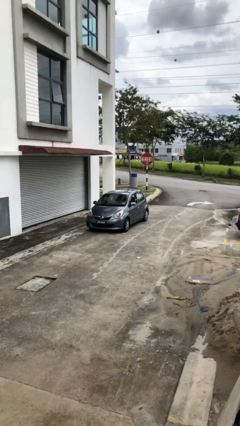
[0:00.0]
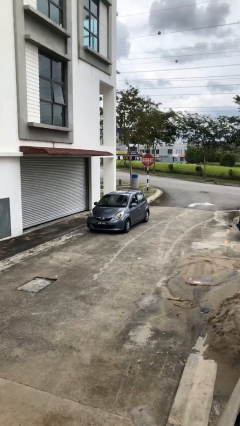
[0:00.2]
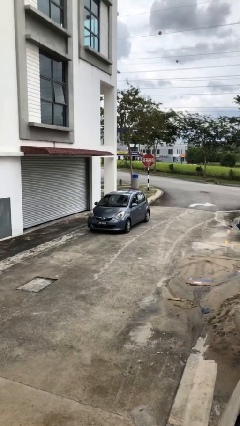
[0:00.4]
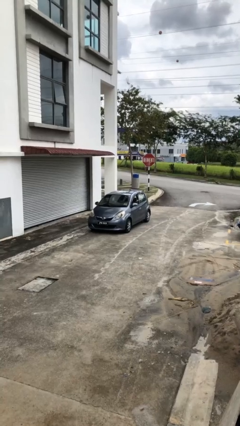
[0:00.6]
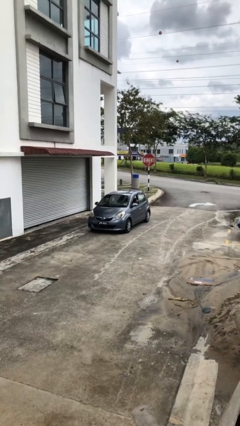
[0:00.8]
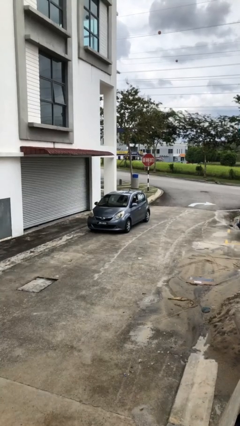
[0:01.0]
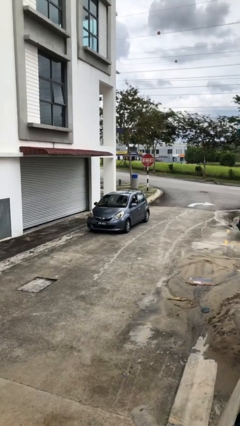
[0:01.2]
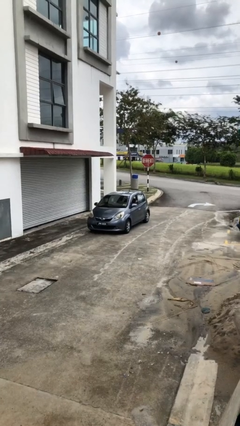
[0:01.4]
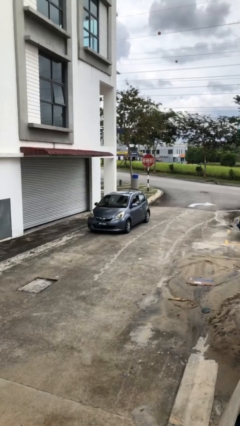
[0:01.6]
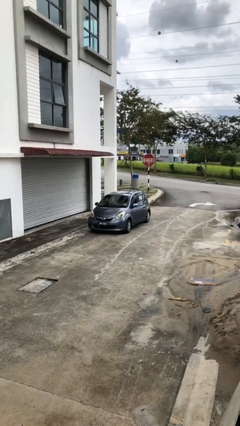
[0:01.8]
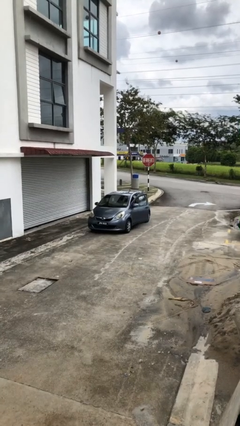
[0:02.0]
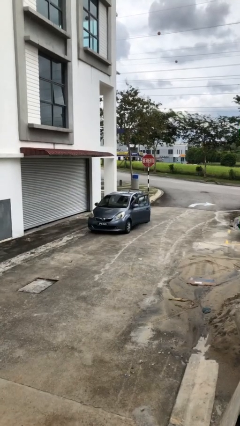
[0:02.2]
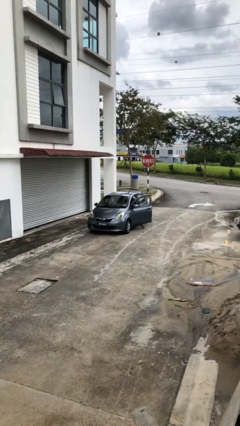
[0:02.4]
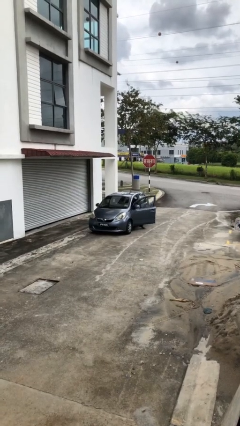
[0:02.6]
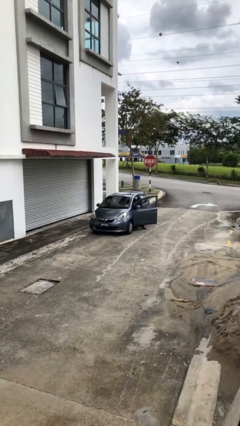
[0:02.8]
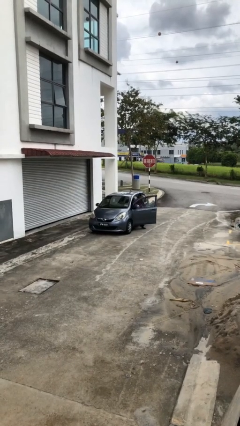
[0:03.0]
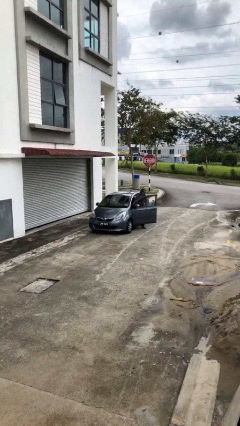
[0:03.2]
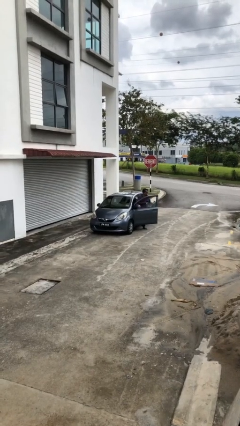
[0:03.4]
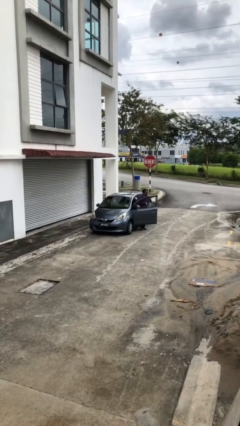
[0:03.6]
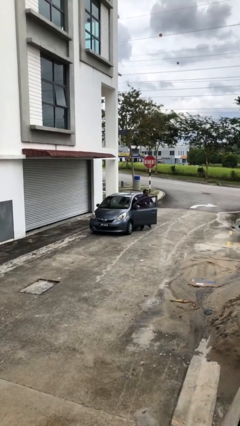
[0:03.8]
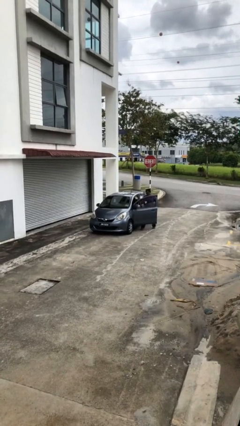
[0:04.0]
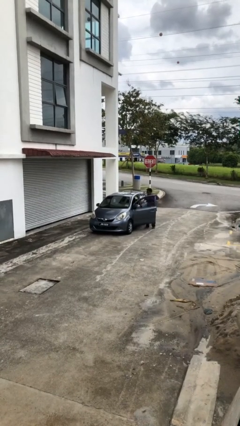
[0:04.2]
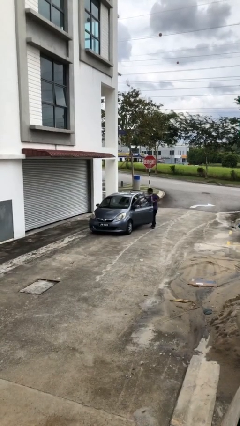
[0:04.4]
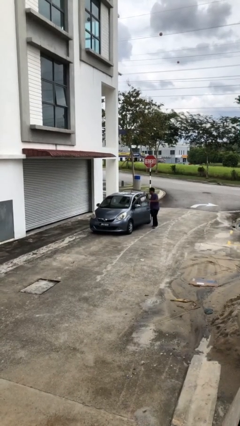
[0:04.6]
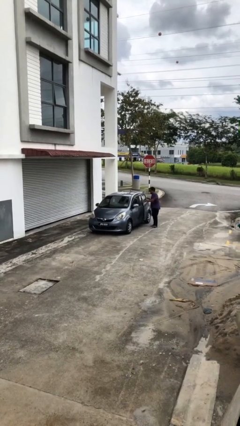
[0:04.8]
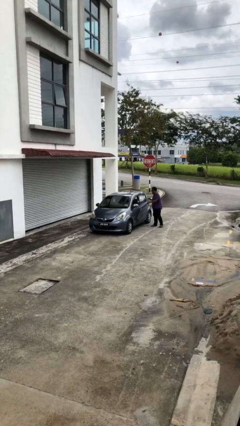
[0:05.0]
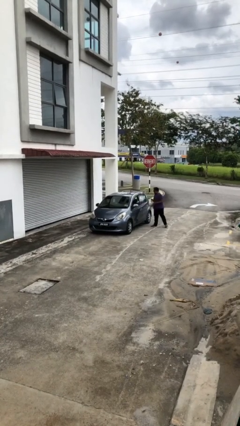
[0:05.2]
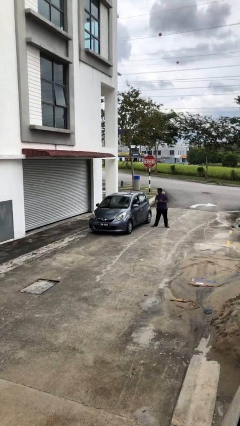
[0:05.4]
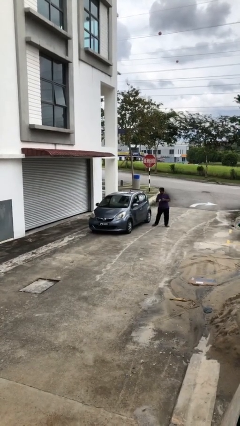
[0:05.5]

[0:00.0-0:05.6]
car drops off person

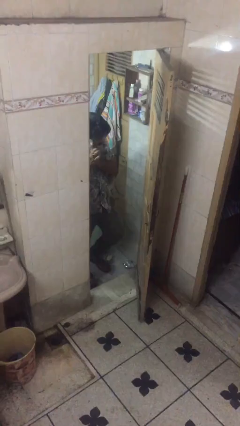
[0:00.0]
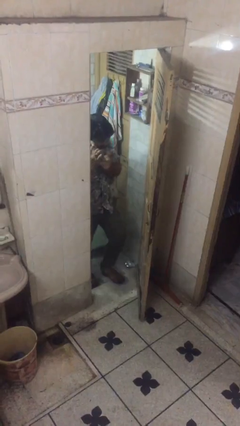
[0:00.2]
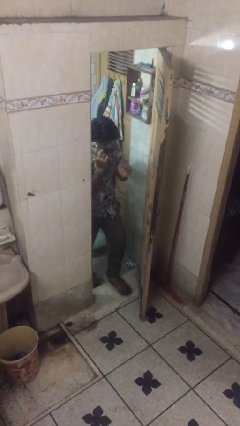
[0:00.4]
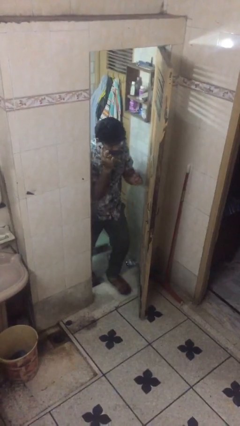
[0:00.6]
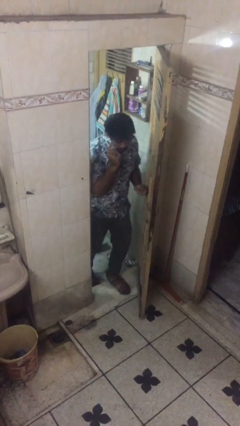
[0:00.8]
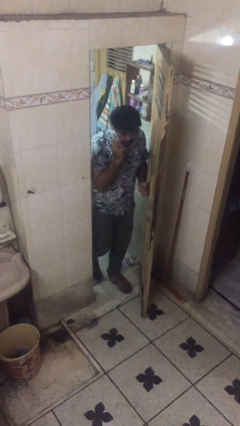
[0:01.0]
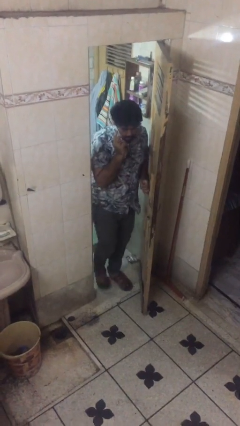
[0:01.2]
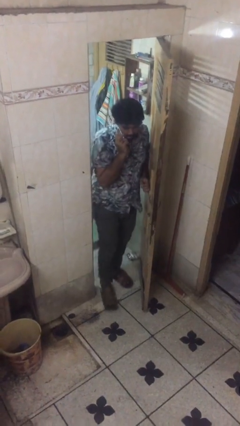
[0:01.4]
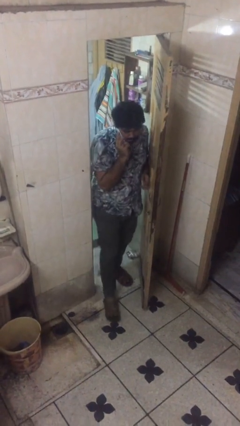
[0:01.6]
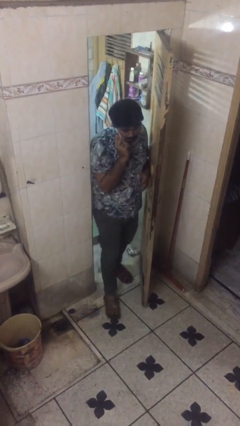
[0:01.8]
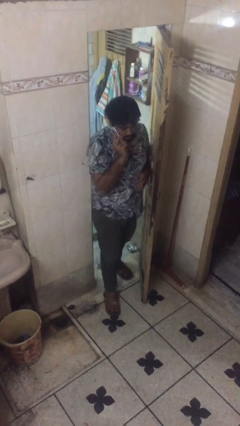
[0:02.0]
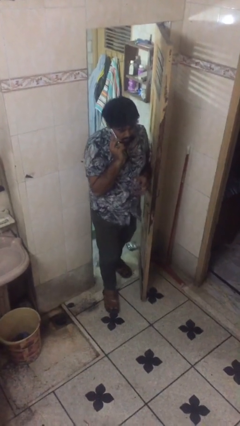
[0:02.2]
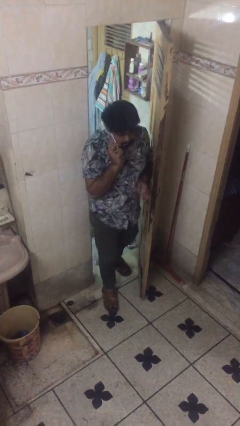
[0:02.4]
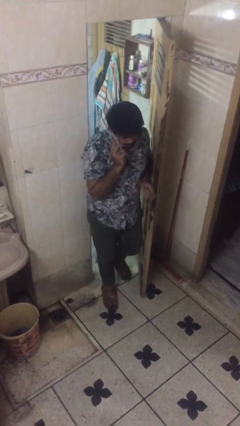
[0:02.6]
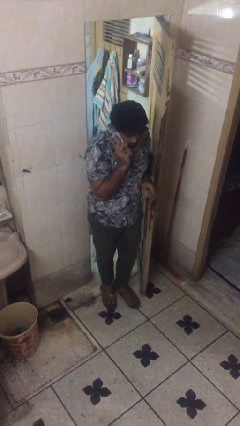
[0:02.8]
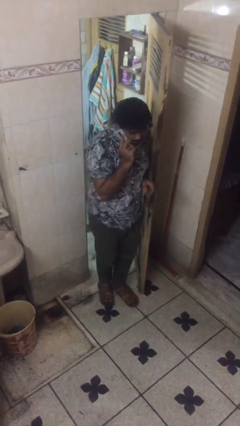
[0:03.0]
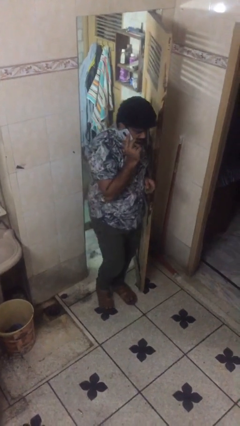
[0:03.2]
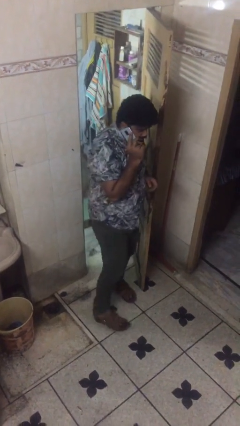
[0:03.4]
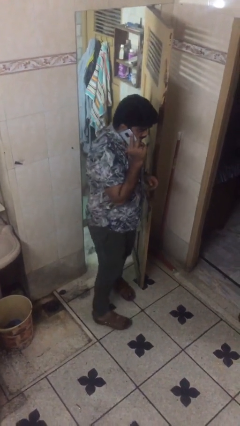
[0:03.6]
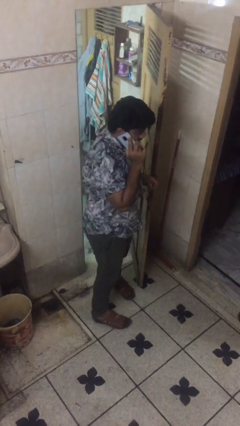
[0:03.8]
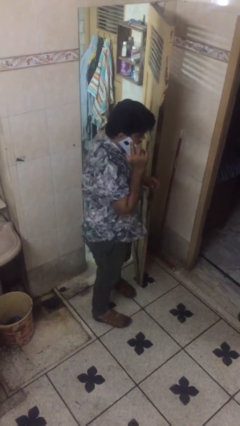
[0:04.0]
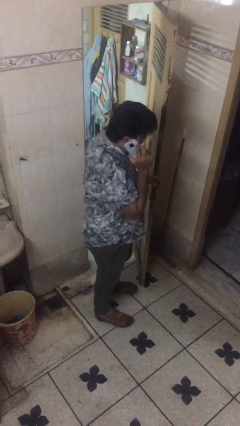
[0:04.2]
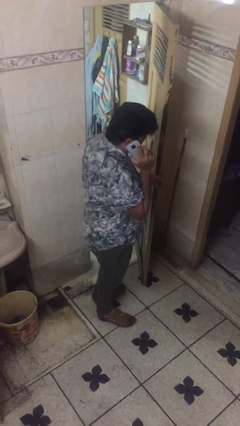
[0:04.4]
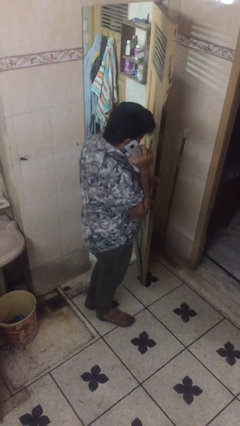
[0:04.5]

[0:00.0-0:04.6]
person enters scene through structure

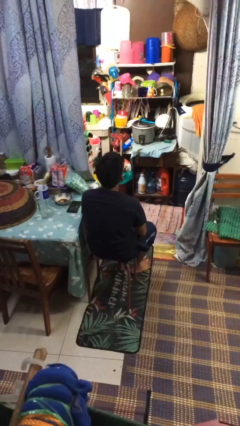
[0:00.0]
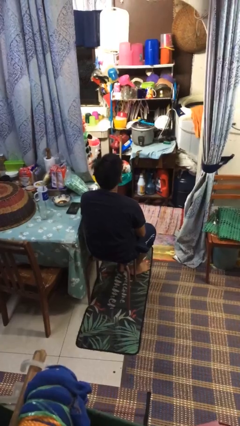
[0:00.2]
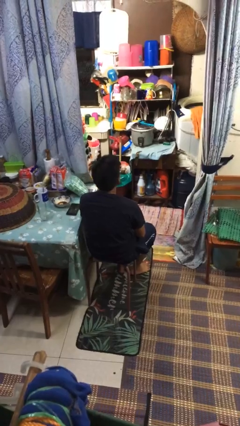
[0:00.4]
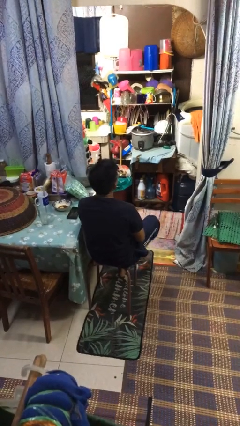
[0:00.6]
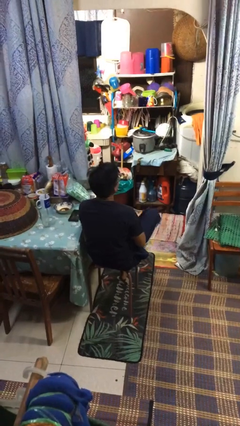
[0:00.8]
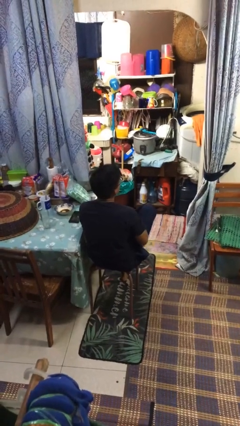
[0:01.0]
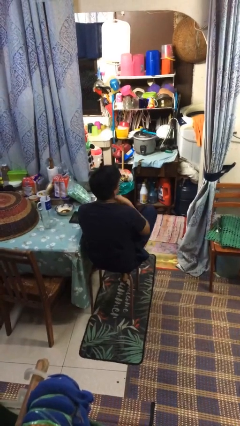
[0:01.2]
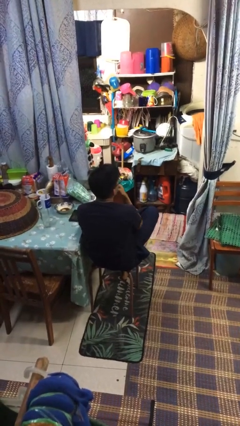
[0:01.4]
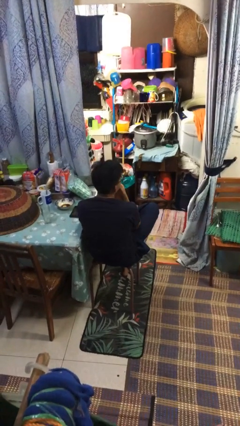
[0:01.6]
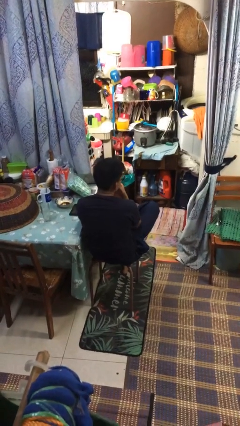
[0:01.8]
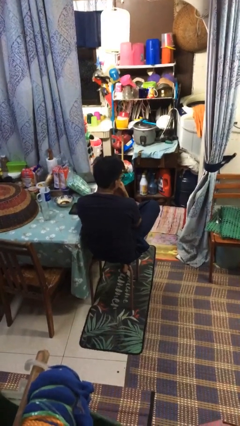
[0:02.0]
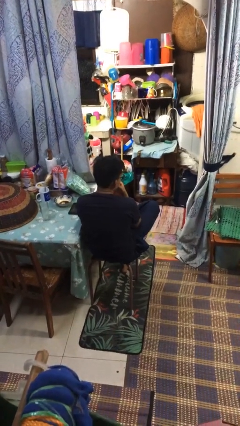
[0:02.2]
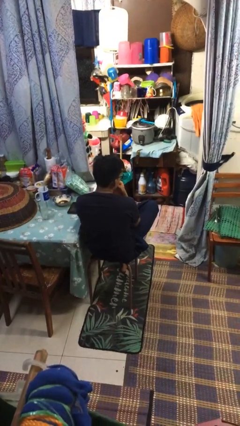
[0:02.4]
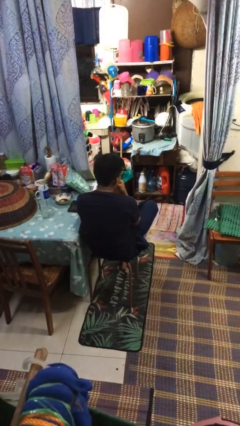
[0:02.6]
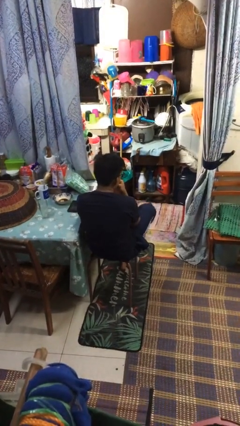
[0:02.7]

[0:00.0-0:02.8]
person crosses legs

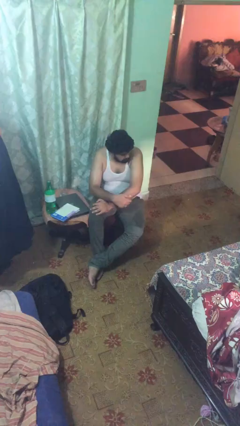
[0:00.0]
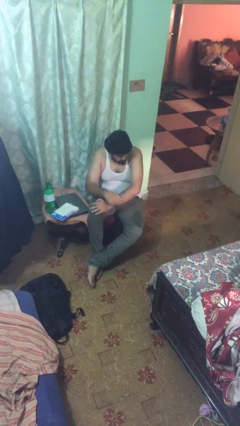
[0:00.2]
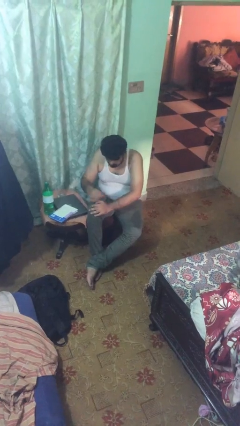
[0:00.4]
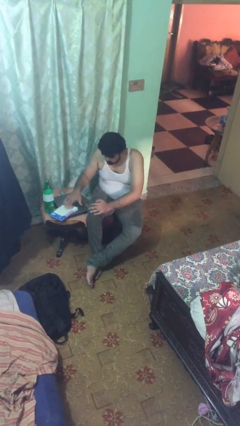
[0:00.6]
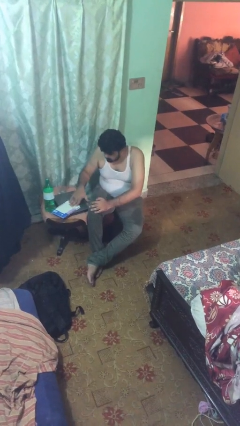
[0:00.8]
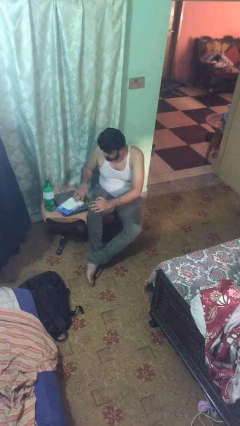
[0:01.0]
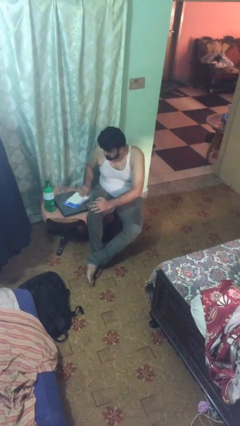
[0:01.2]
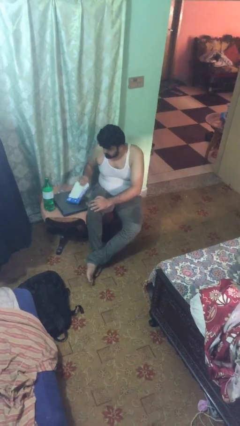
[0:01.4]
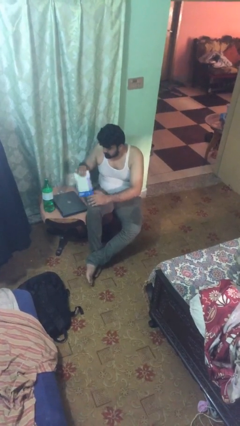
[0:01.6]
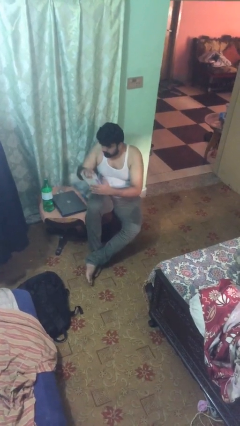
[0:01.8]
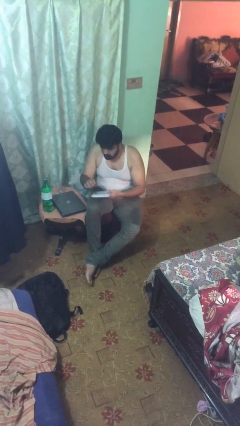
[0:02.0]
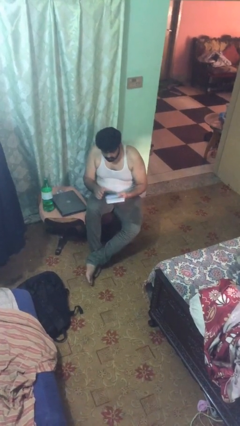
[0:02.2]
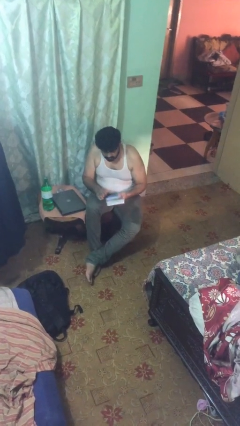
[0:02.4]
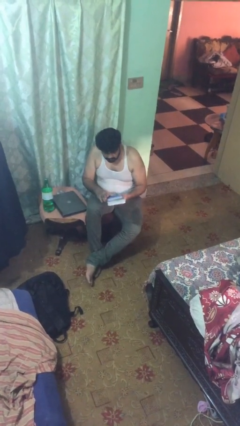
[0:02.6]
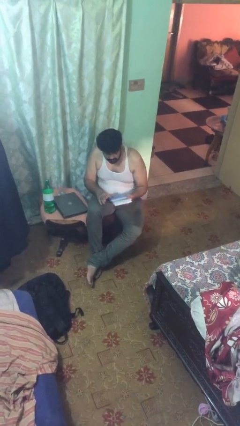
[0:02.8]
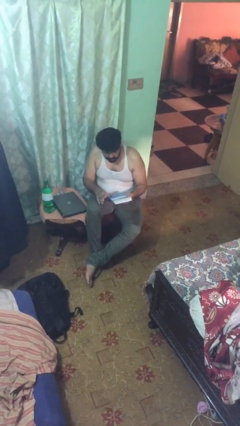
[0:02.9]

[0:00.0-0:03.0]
person picks up object from table

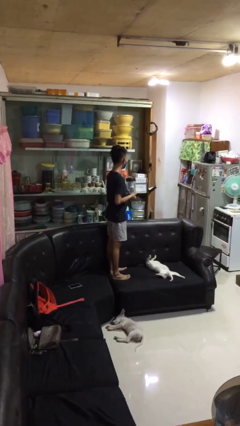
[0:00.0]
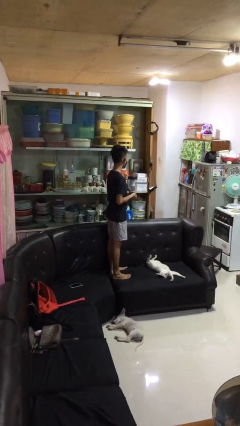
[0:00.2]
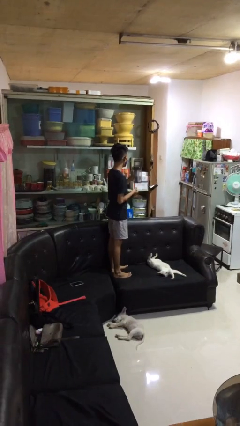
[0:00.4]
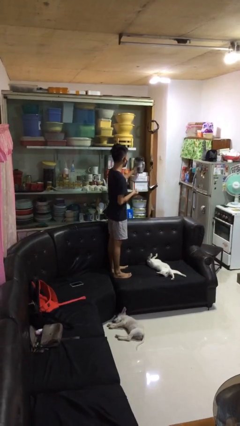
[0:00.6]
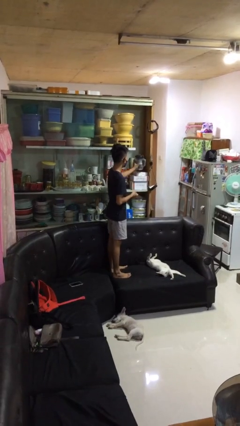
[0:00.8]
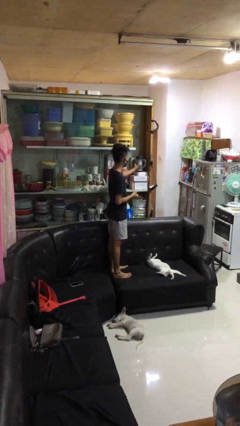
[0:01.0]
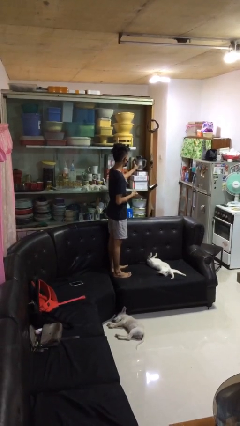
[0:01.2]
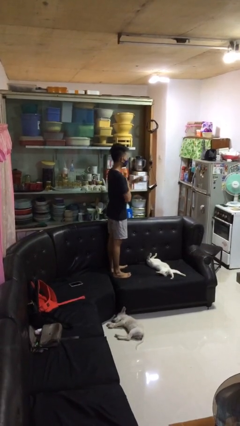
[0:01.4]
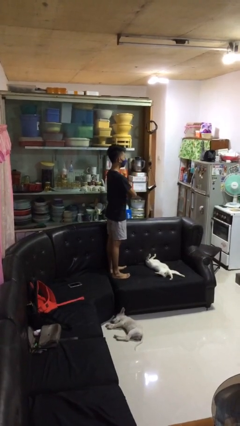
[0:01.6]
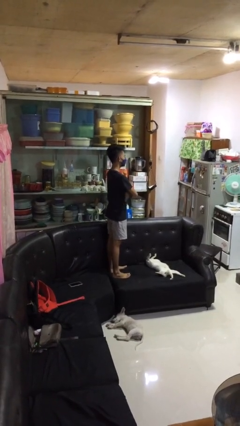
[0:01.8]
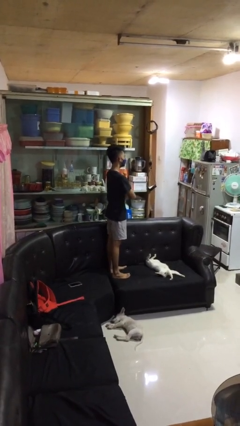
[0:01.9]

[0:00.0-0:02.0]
person puts down object into cabinet

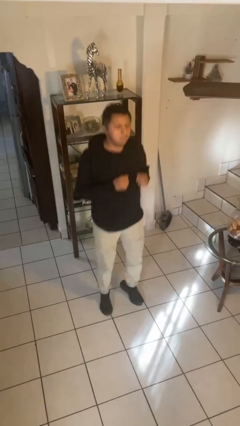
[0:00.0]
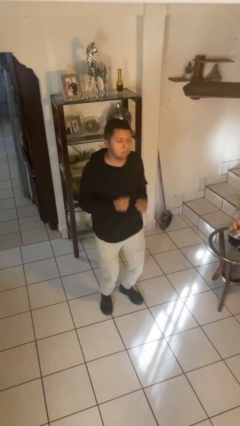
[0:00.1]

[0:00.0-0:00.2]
person jumps
